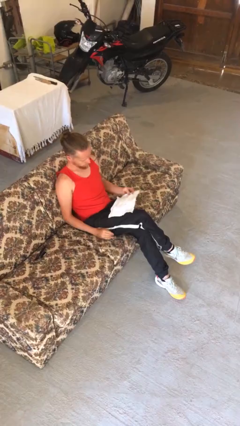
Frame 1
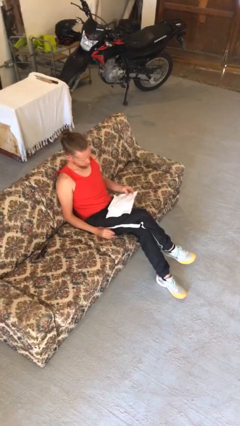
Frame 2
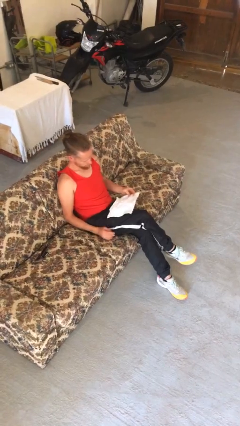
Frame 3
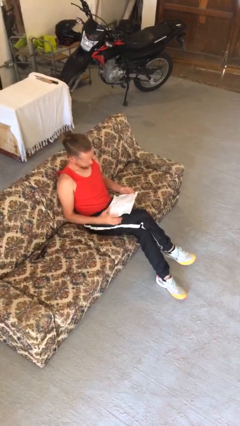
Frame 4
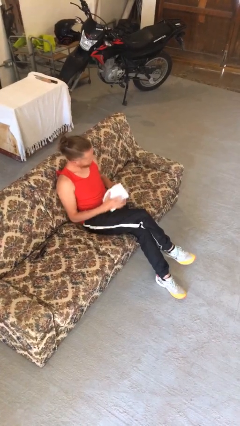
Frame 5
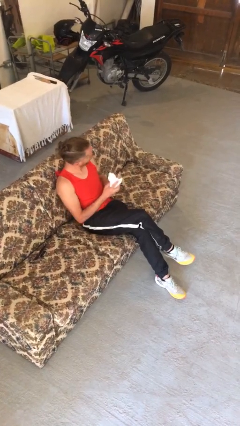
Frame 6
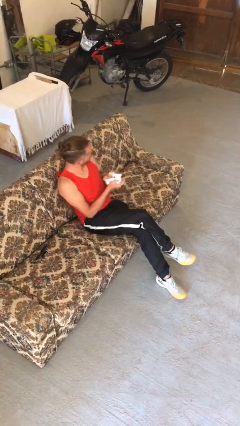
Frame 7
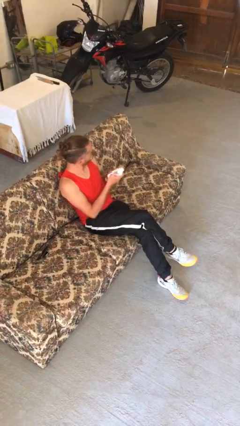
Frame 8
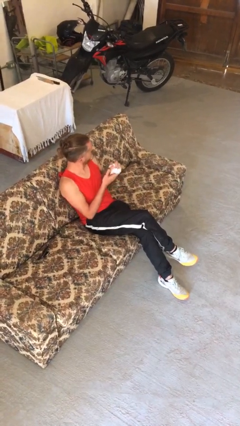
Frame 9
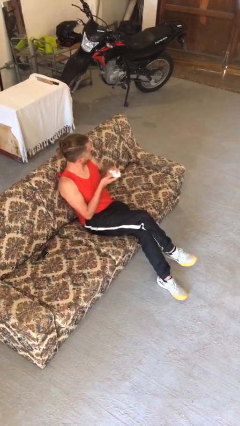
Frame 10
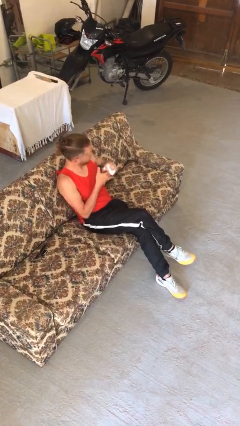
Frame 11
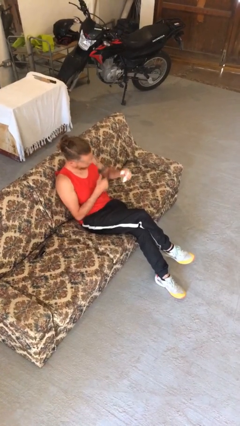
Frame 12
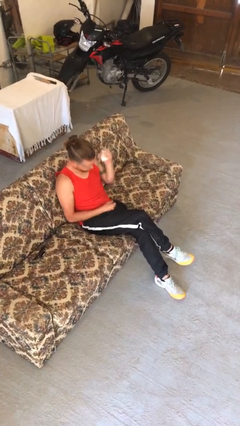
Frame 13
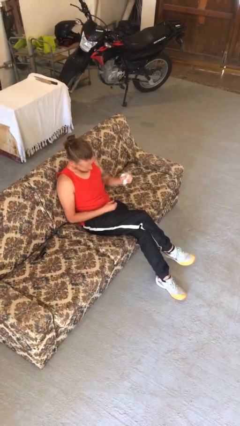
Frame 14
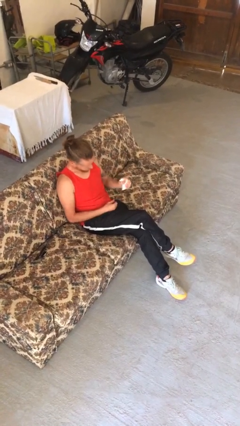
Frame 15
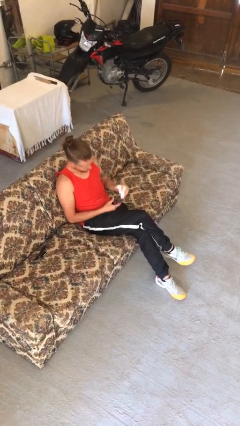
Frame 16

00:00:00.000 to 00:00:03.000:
person crumples paper

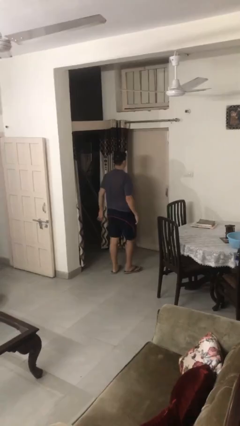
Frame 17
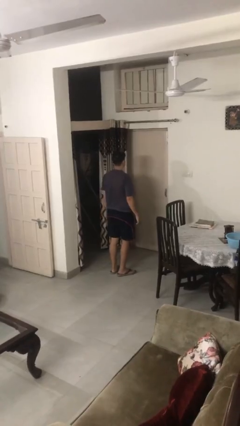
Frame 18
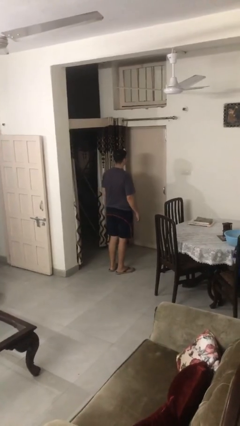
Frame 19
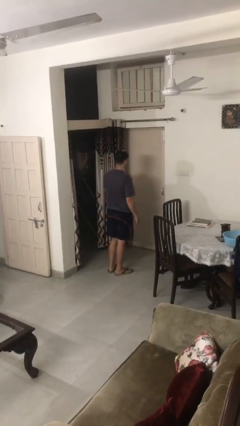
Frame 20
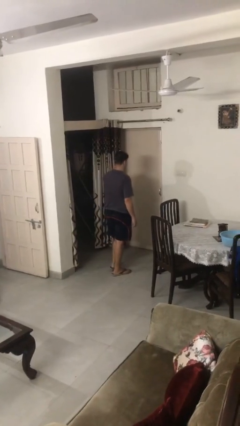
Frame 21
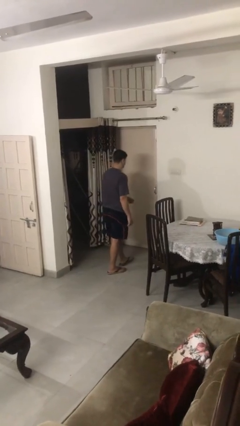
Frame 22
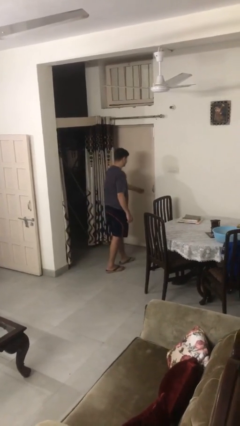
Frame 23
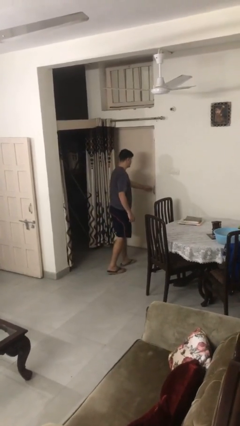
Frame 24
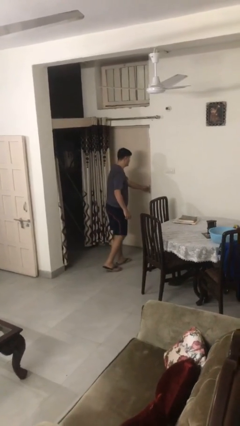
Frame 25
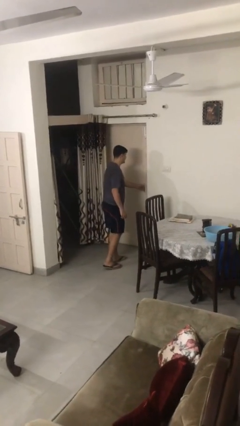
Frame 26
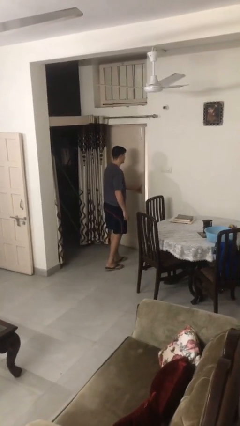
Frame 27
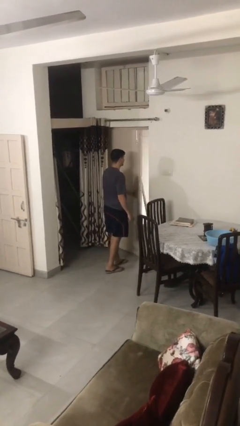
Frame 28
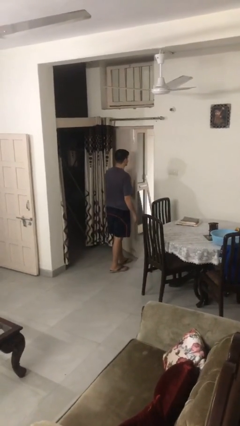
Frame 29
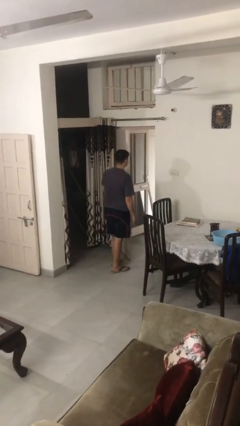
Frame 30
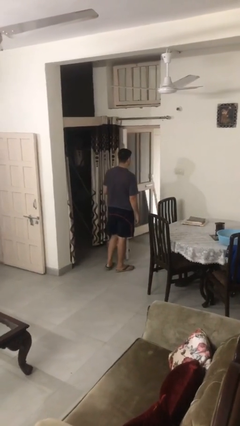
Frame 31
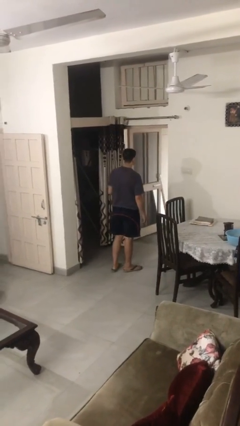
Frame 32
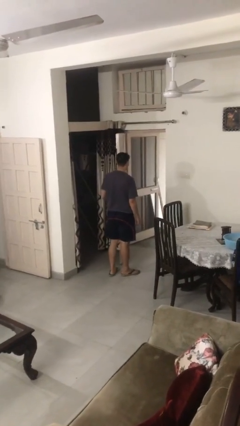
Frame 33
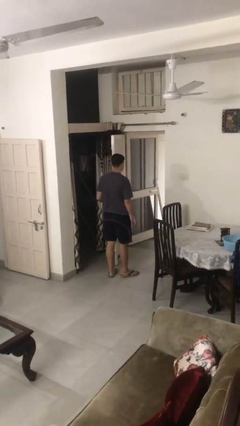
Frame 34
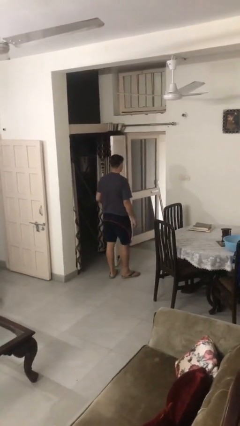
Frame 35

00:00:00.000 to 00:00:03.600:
person opens facility door

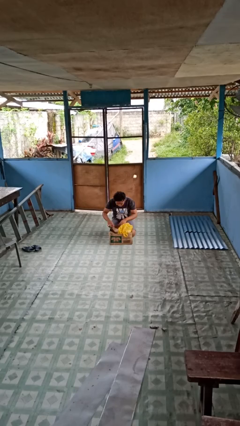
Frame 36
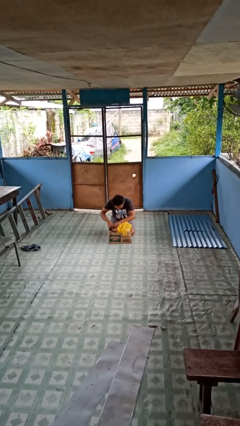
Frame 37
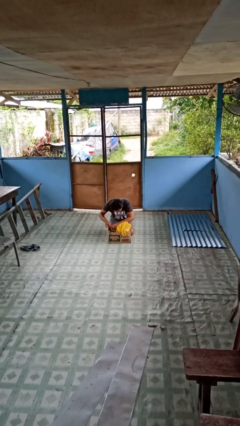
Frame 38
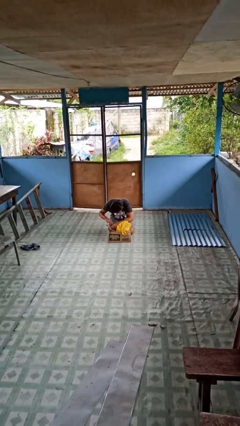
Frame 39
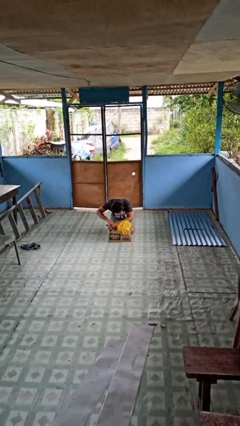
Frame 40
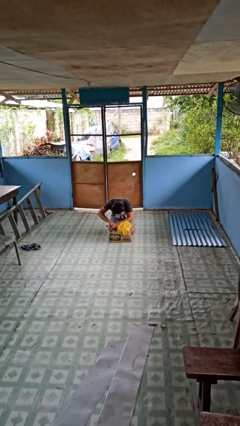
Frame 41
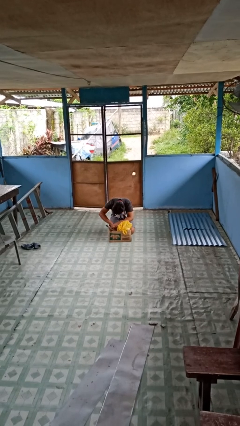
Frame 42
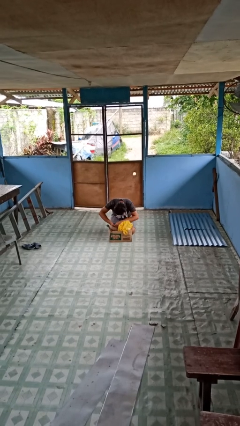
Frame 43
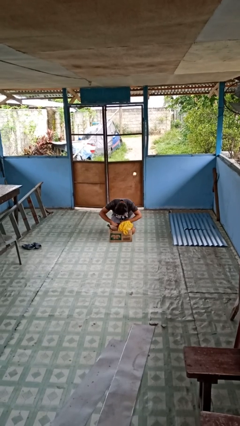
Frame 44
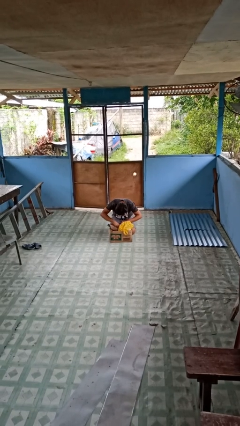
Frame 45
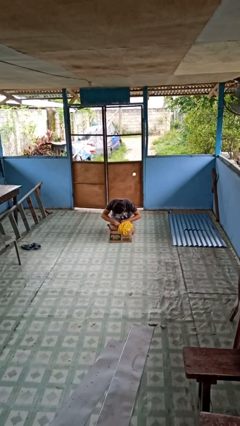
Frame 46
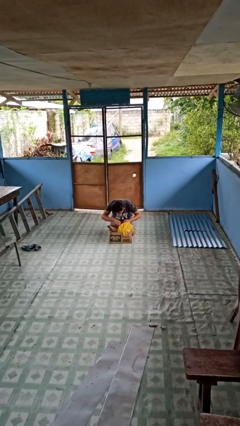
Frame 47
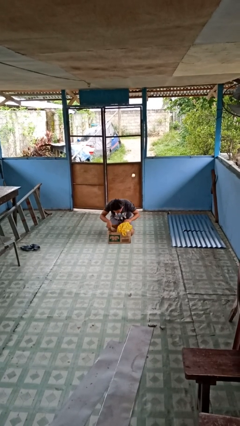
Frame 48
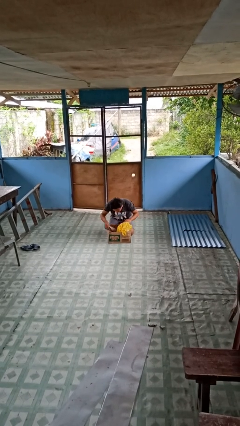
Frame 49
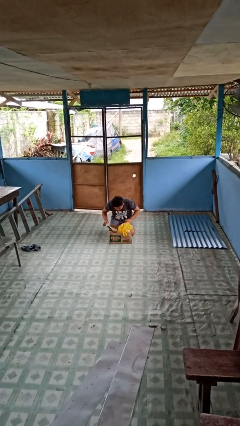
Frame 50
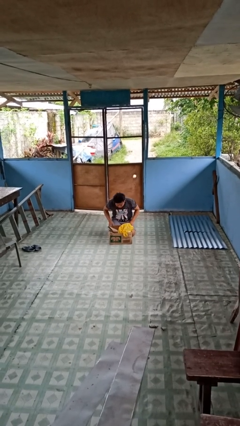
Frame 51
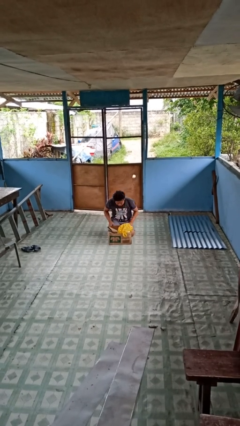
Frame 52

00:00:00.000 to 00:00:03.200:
person searches in box

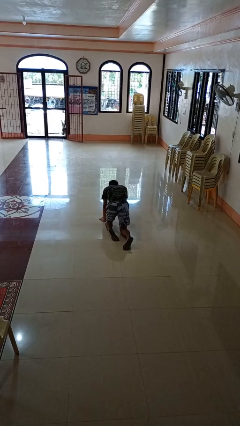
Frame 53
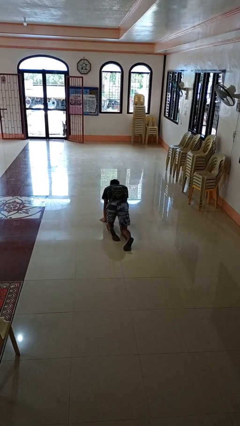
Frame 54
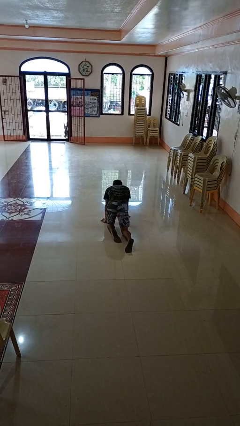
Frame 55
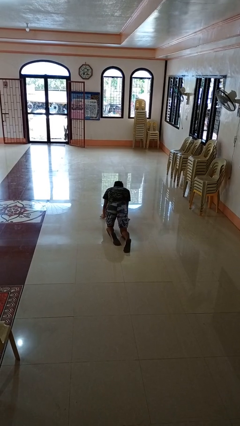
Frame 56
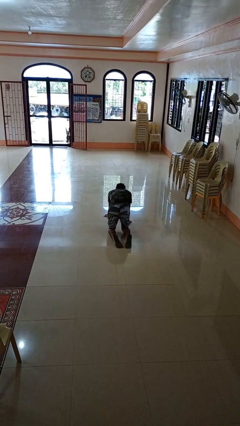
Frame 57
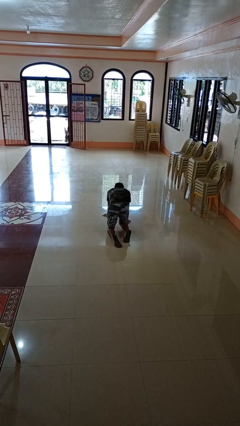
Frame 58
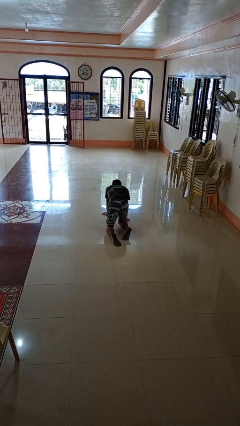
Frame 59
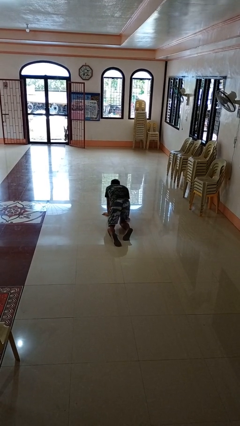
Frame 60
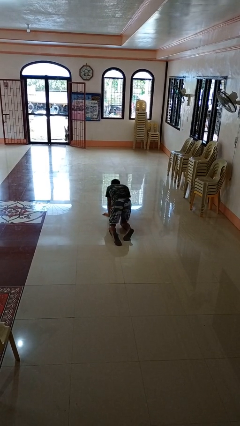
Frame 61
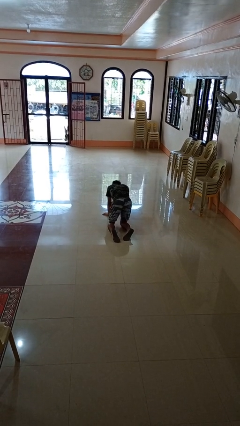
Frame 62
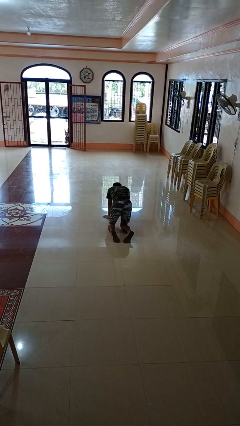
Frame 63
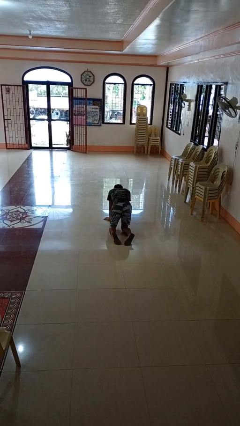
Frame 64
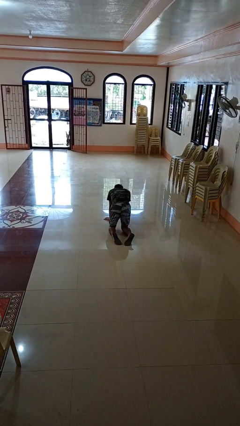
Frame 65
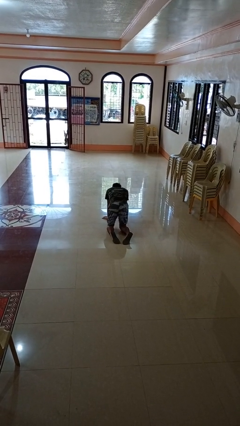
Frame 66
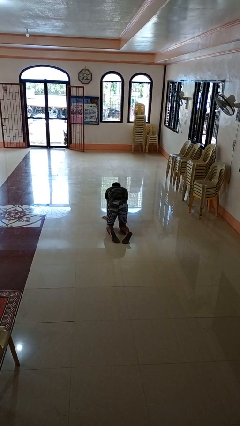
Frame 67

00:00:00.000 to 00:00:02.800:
person crawls

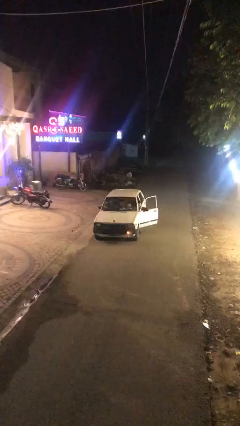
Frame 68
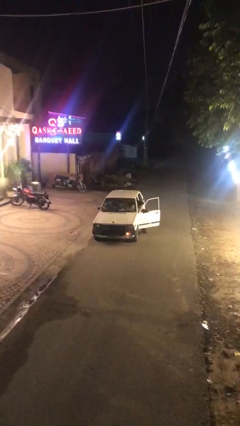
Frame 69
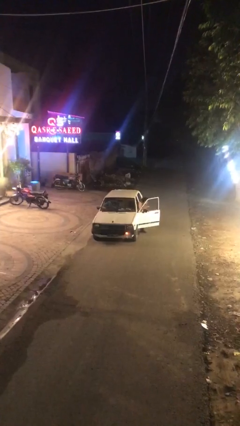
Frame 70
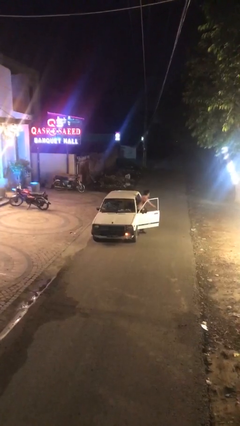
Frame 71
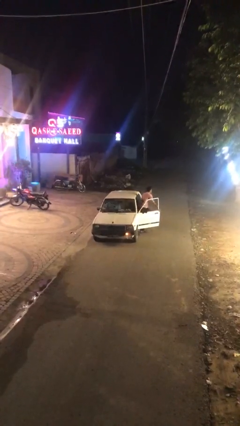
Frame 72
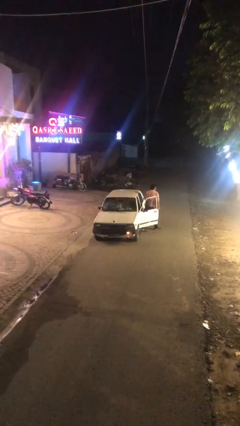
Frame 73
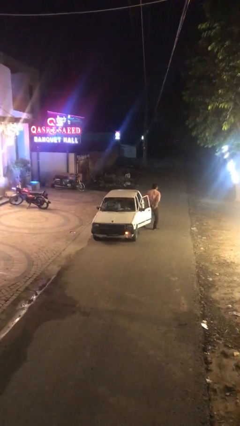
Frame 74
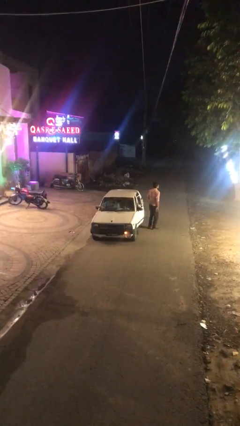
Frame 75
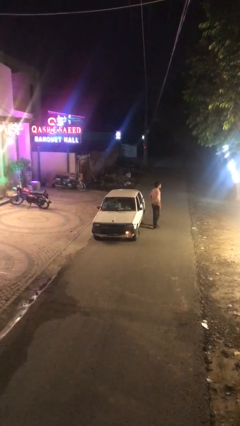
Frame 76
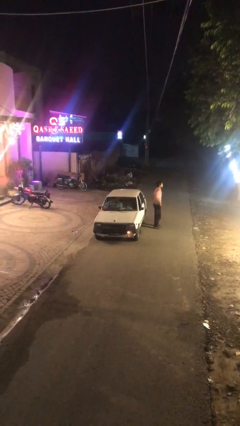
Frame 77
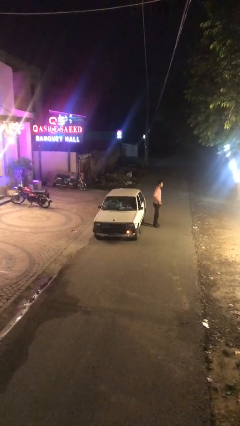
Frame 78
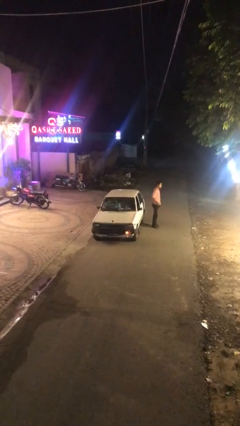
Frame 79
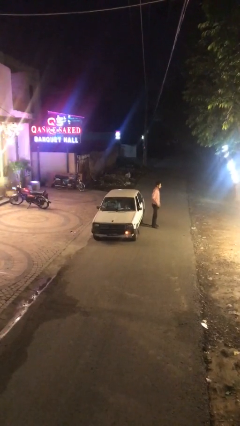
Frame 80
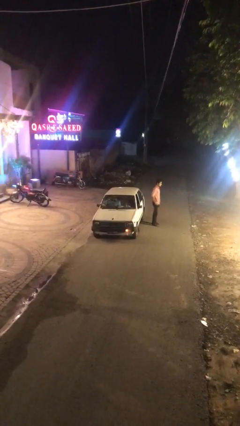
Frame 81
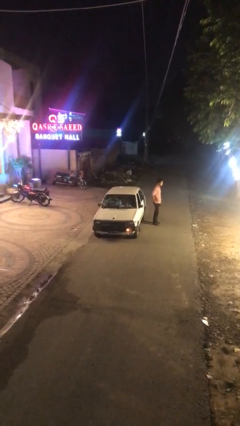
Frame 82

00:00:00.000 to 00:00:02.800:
car drops off person

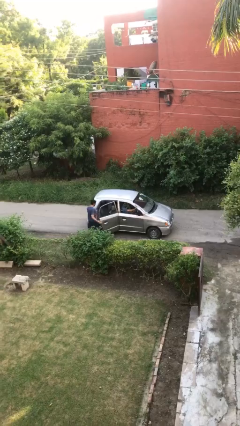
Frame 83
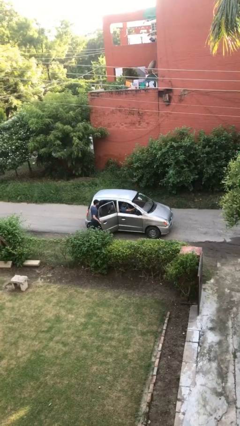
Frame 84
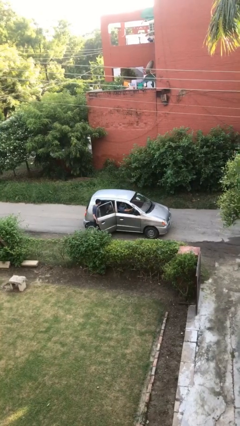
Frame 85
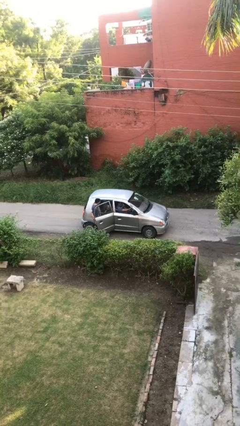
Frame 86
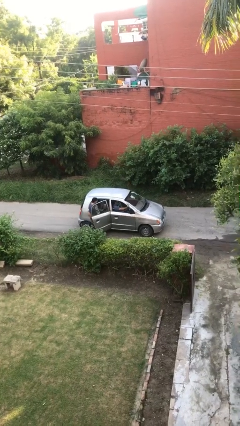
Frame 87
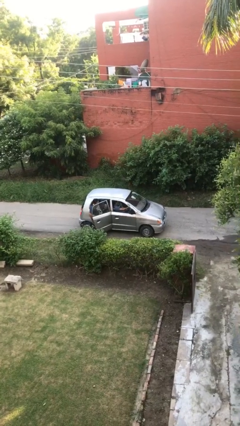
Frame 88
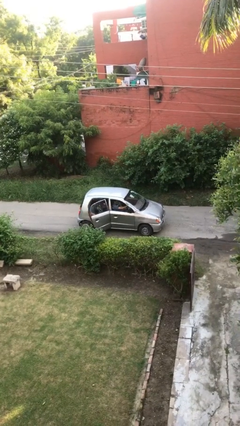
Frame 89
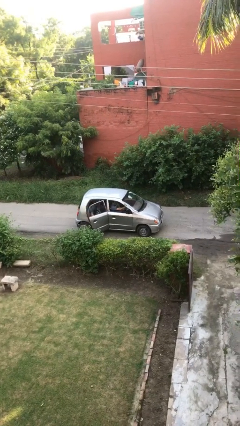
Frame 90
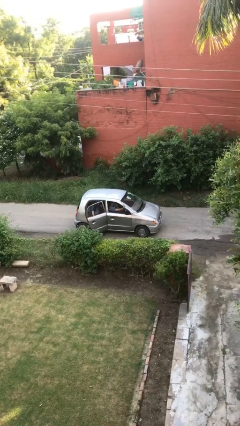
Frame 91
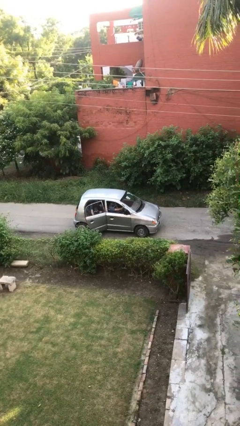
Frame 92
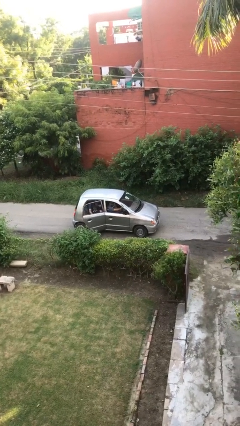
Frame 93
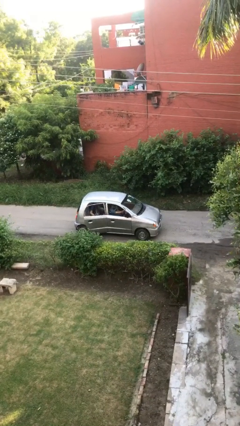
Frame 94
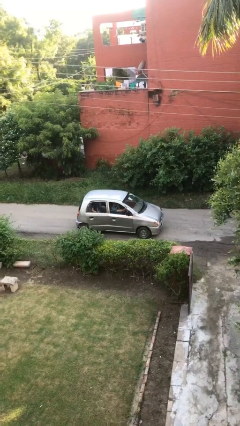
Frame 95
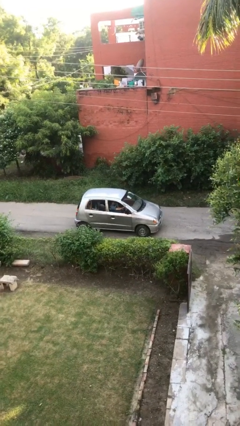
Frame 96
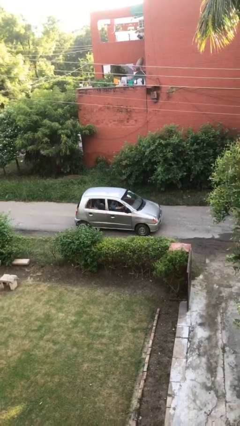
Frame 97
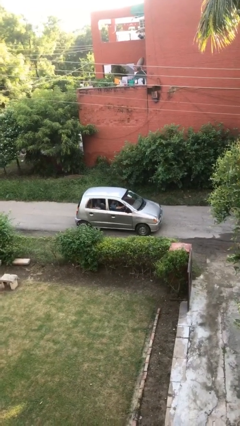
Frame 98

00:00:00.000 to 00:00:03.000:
car picks up person
